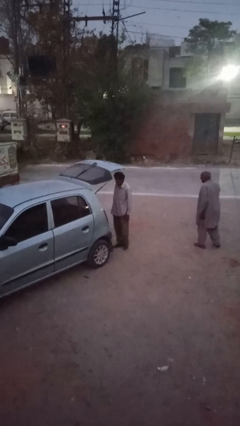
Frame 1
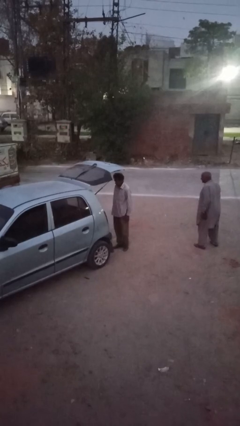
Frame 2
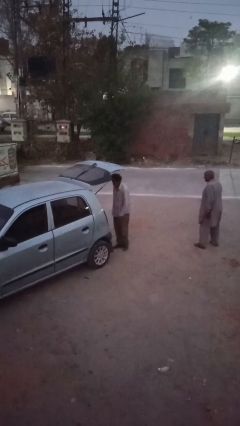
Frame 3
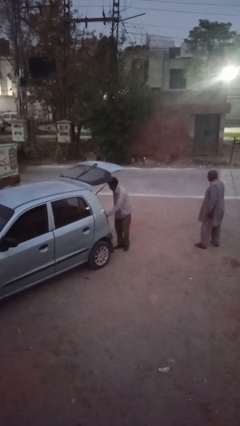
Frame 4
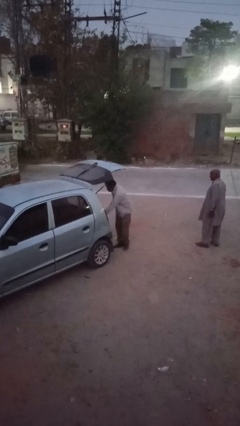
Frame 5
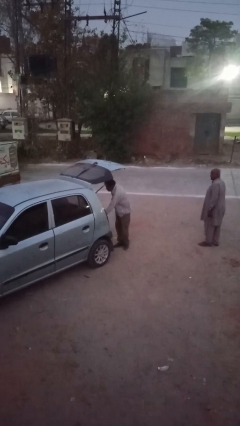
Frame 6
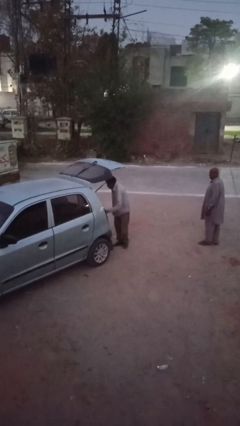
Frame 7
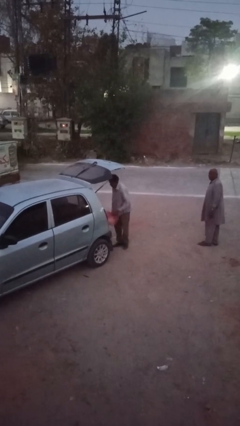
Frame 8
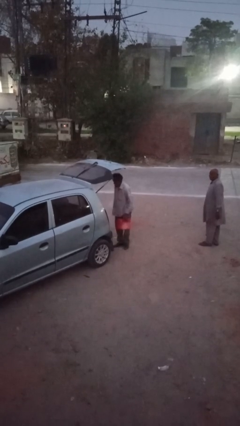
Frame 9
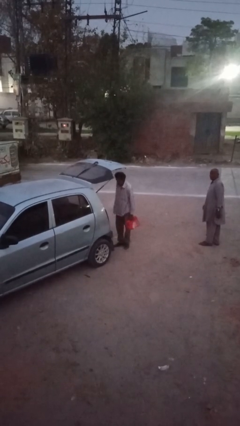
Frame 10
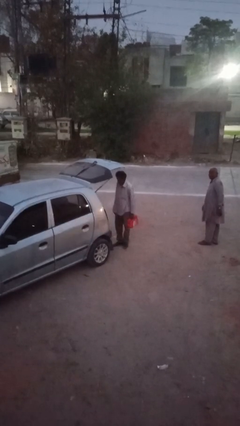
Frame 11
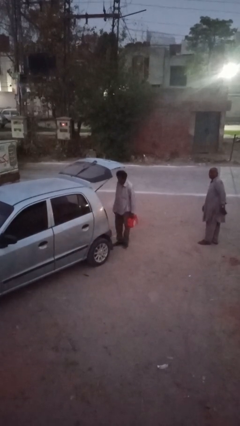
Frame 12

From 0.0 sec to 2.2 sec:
person unloads car

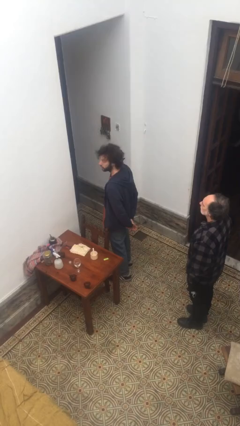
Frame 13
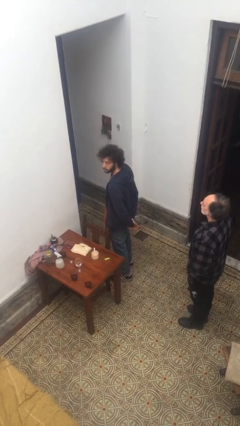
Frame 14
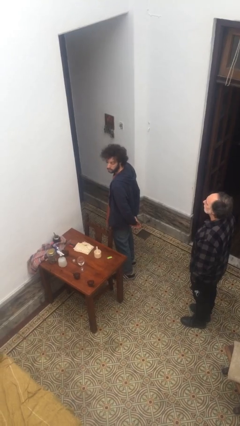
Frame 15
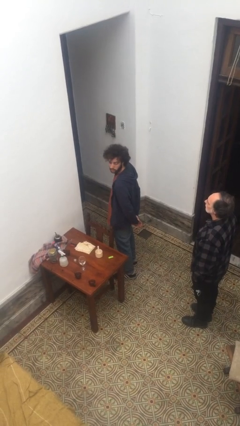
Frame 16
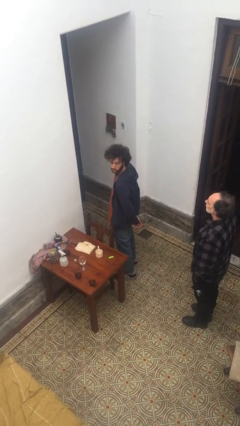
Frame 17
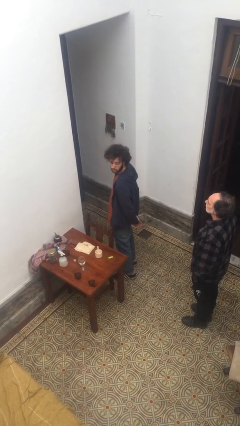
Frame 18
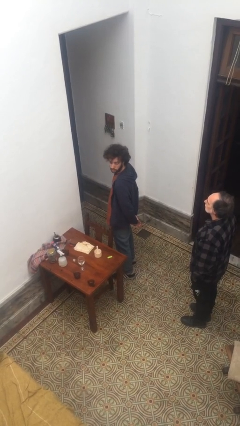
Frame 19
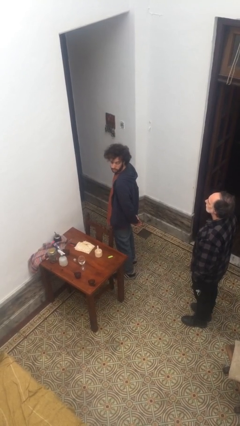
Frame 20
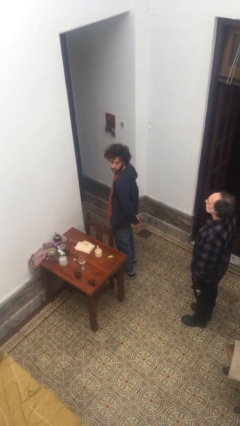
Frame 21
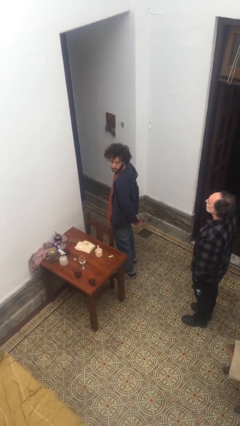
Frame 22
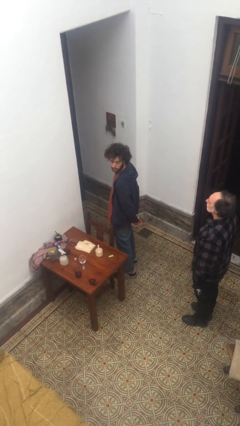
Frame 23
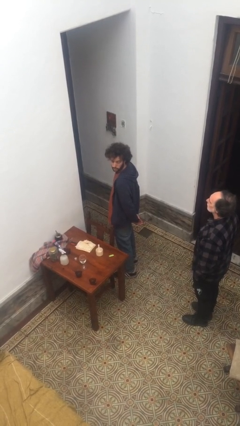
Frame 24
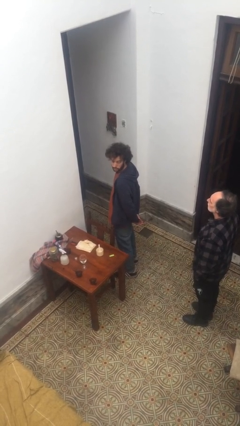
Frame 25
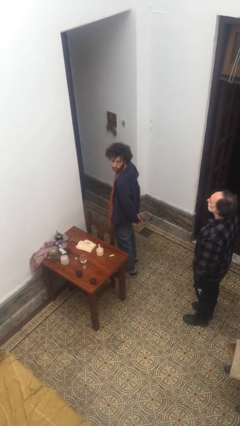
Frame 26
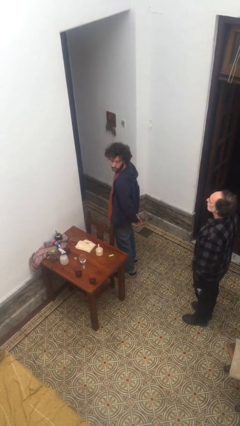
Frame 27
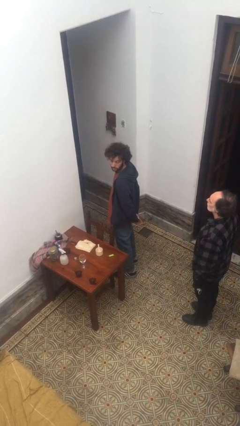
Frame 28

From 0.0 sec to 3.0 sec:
person looks over shoulder

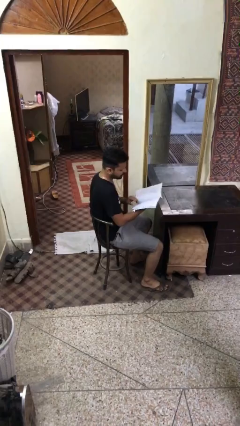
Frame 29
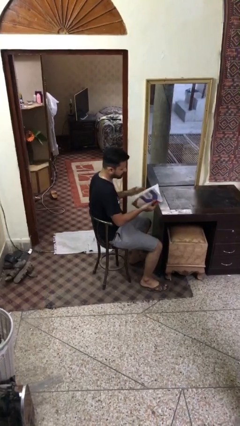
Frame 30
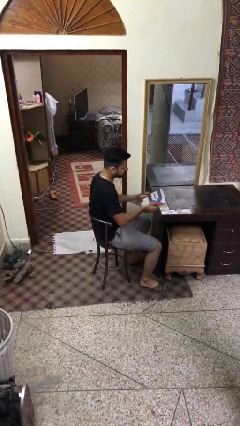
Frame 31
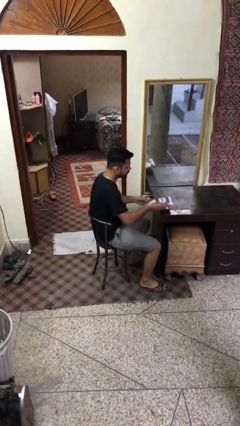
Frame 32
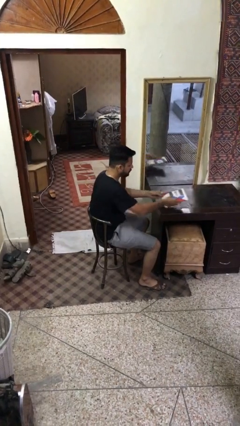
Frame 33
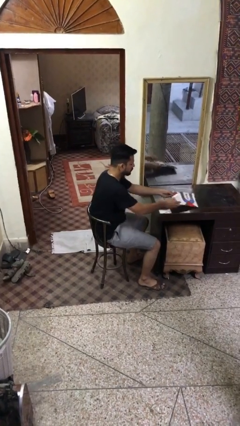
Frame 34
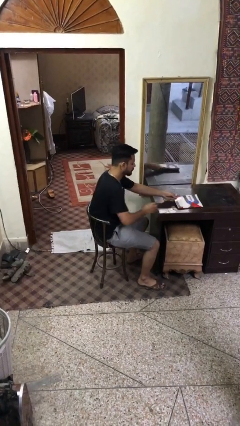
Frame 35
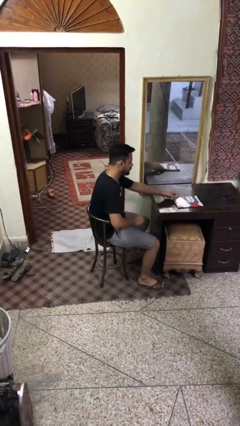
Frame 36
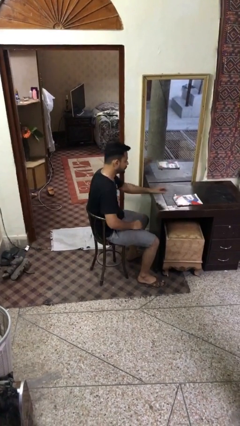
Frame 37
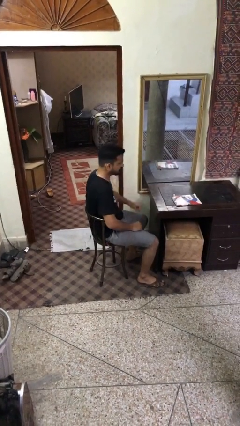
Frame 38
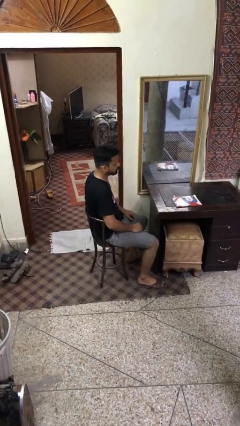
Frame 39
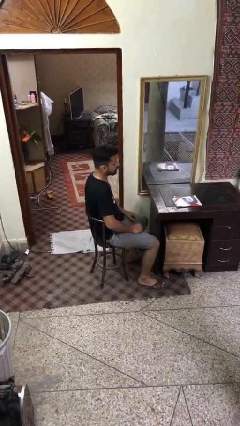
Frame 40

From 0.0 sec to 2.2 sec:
person puts down object on table

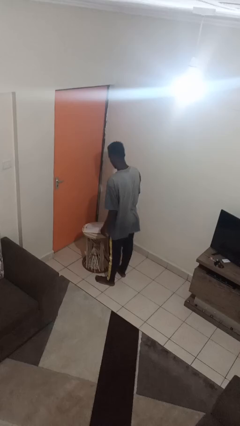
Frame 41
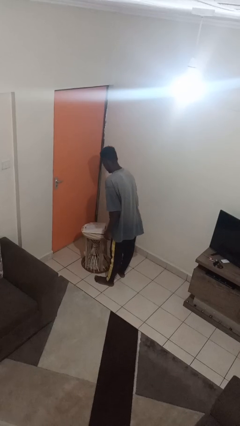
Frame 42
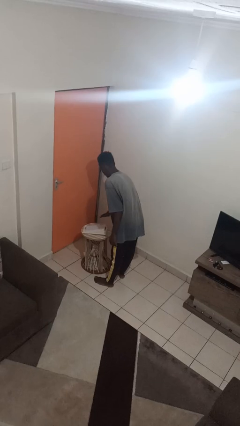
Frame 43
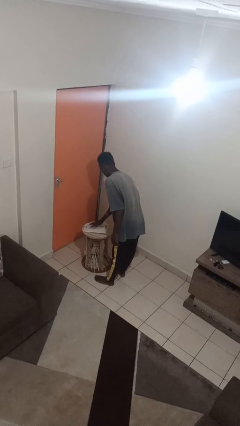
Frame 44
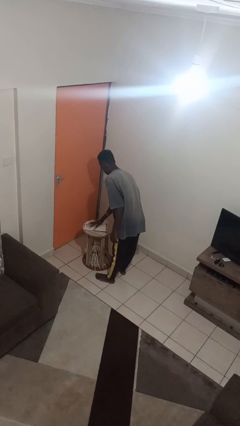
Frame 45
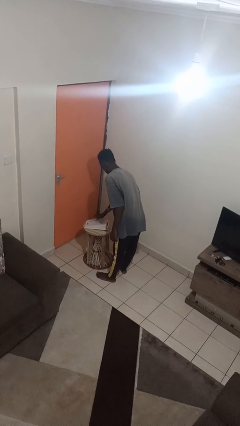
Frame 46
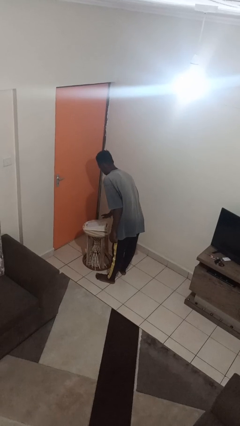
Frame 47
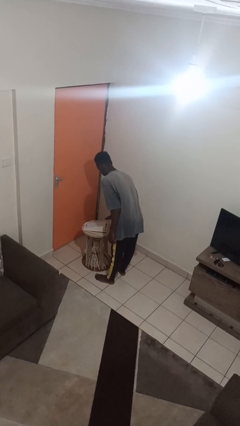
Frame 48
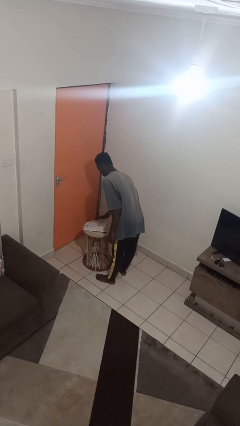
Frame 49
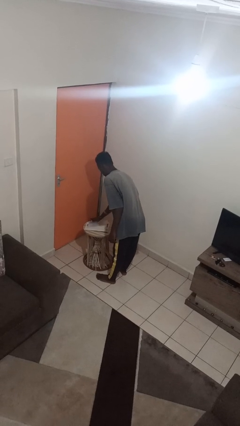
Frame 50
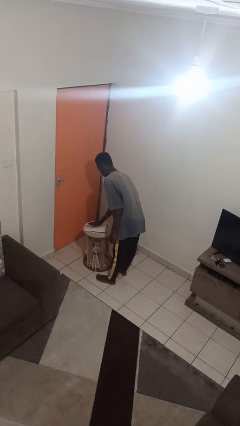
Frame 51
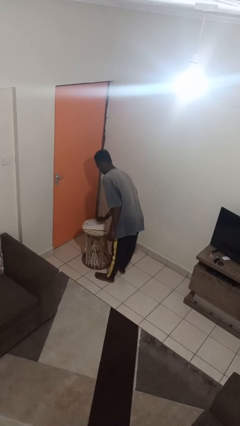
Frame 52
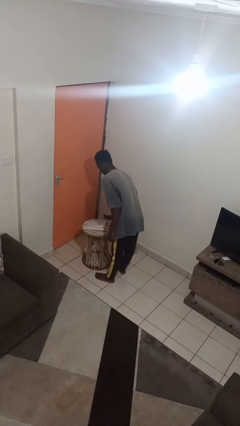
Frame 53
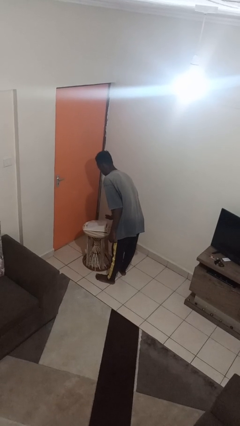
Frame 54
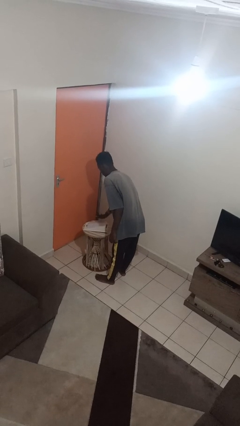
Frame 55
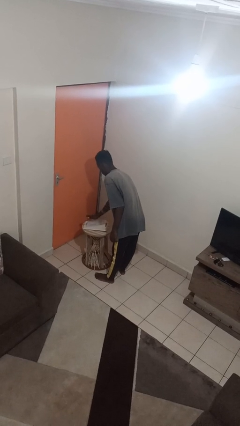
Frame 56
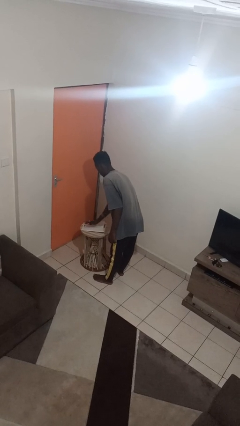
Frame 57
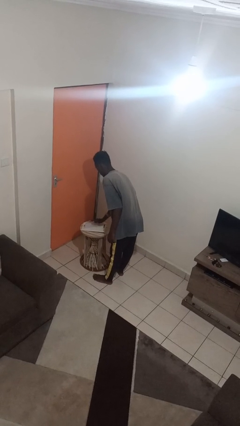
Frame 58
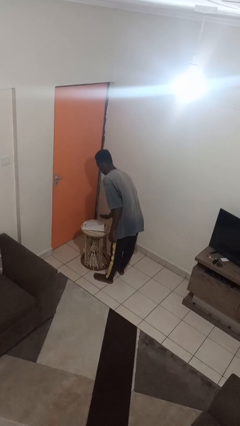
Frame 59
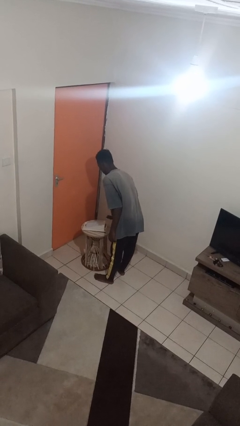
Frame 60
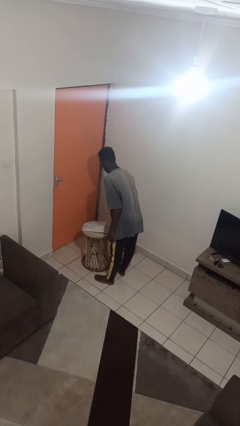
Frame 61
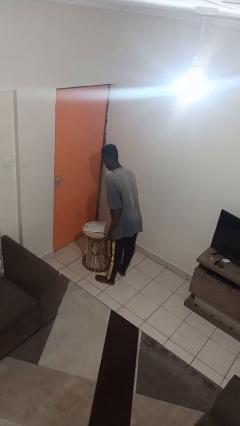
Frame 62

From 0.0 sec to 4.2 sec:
person waves hand over object

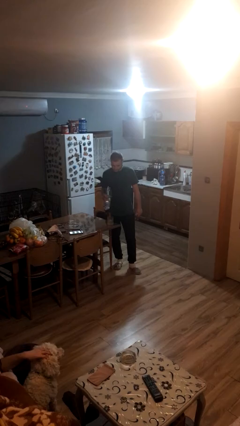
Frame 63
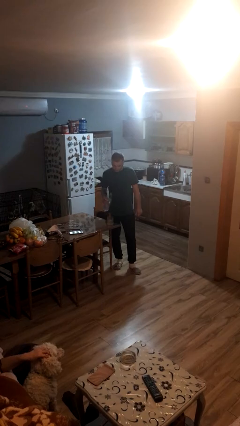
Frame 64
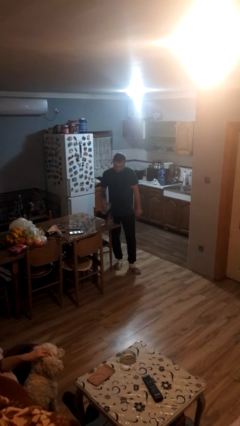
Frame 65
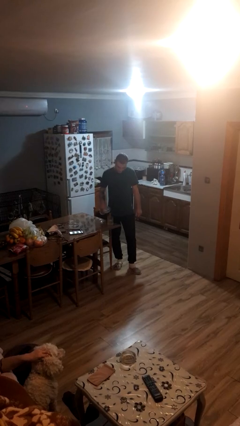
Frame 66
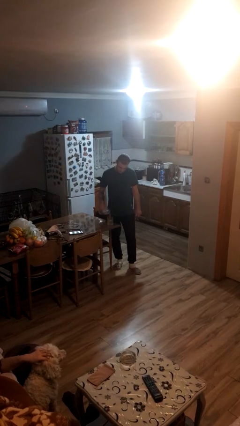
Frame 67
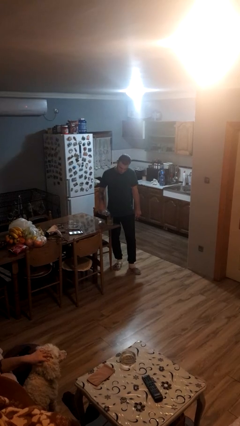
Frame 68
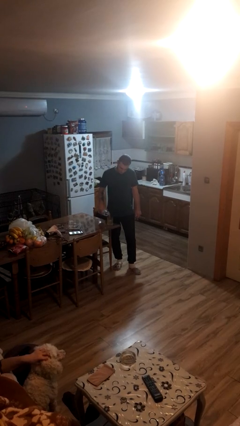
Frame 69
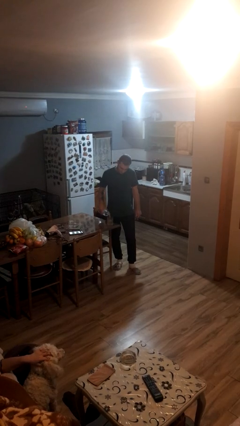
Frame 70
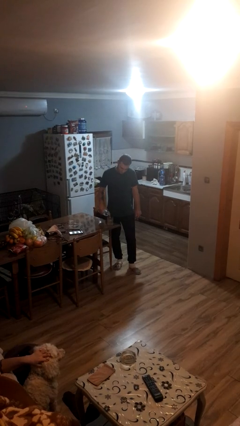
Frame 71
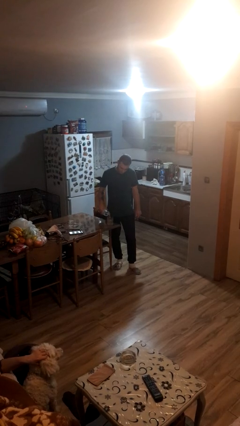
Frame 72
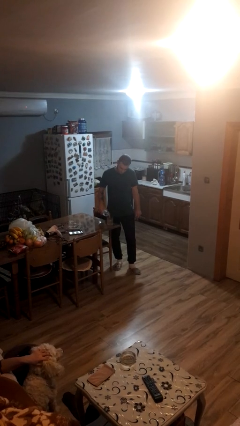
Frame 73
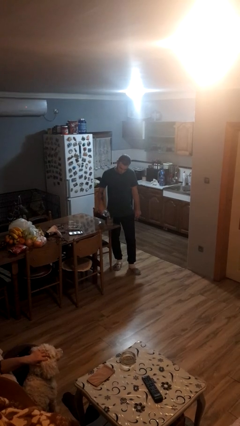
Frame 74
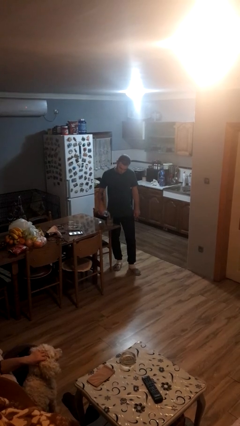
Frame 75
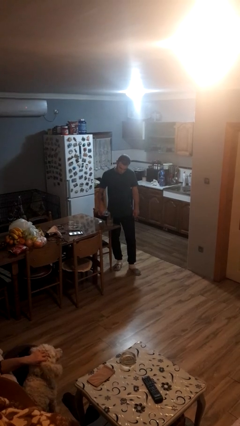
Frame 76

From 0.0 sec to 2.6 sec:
person pours liquid into cup

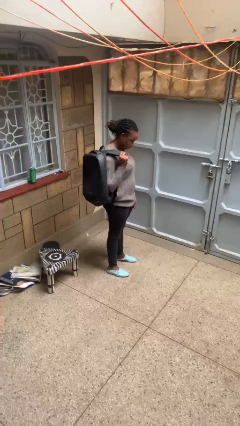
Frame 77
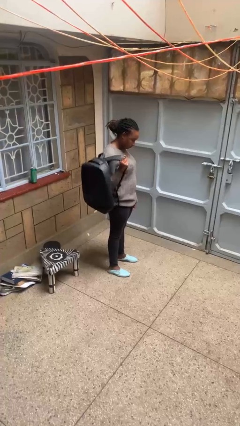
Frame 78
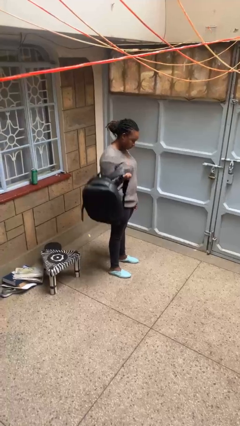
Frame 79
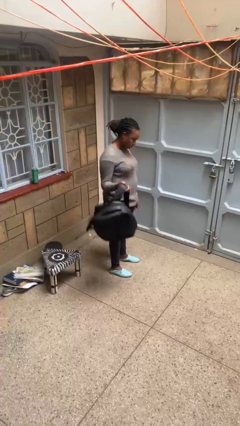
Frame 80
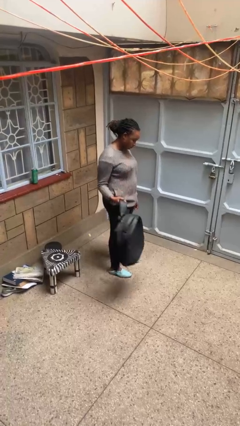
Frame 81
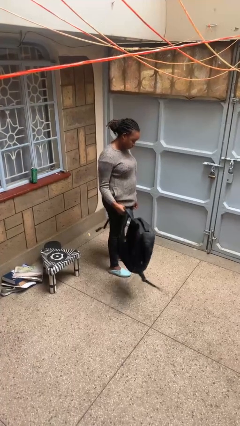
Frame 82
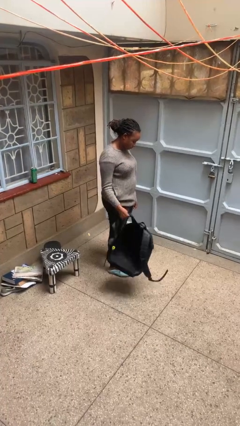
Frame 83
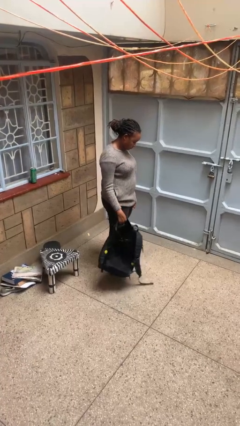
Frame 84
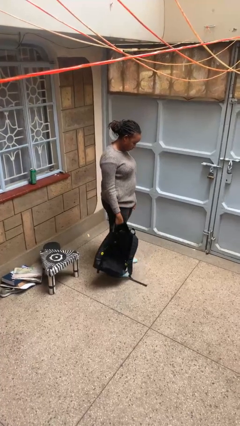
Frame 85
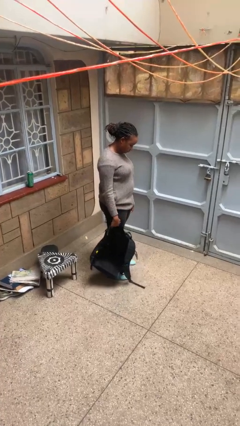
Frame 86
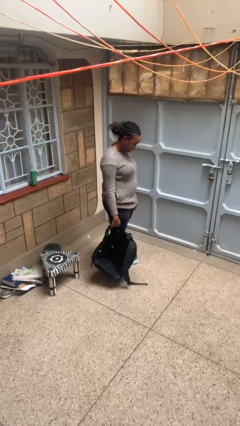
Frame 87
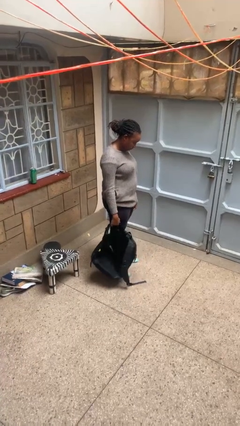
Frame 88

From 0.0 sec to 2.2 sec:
person takes off backpack

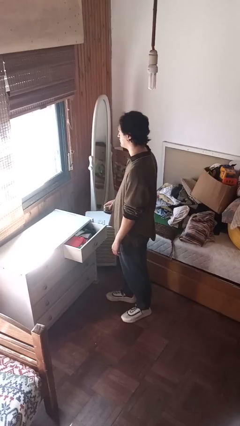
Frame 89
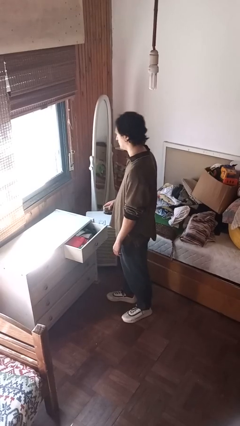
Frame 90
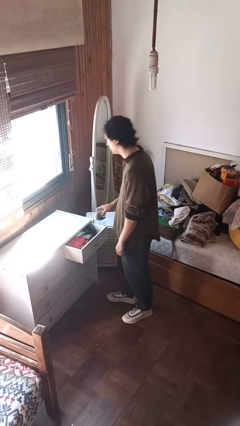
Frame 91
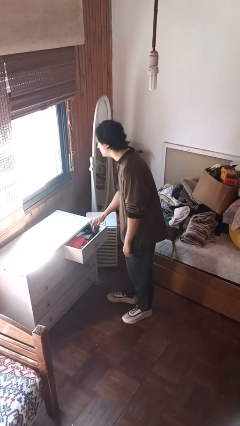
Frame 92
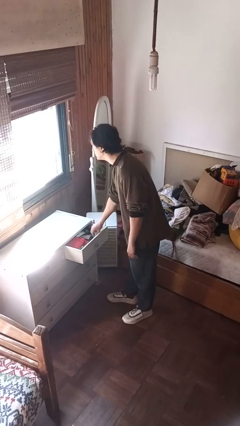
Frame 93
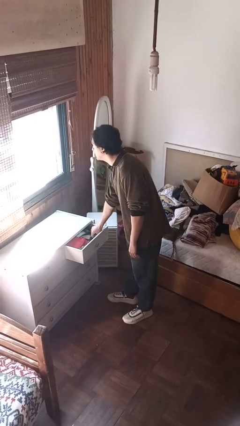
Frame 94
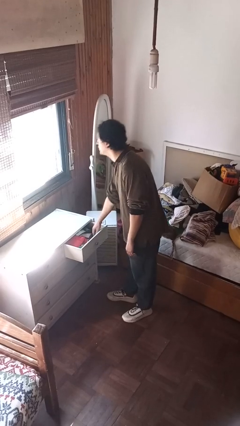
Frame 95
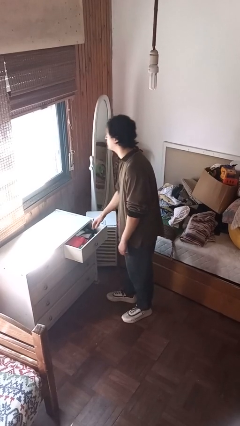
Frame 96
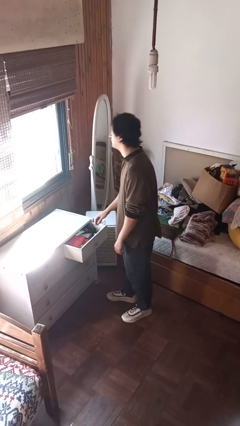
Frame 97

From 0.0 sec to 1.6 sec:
person puts clothes into dresser
